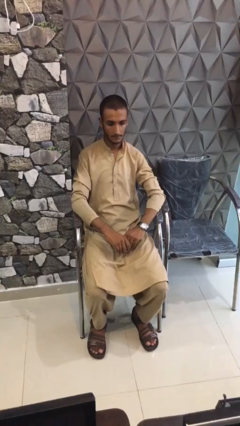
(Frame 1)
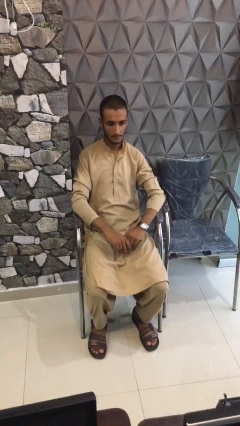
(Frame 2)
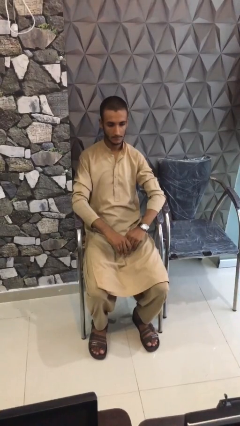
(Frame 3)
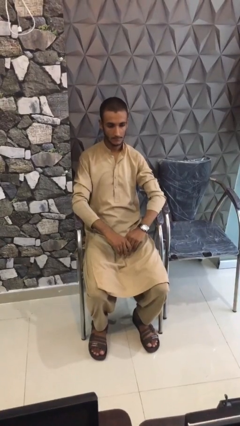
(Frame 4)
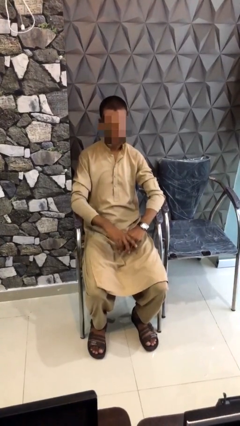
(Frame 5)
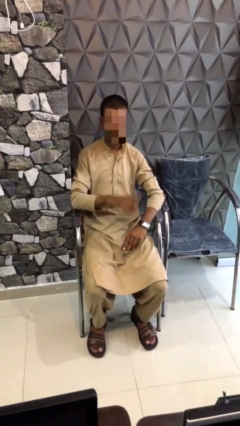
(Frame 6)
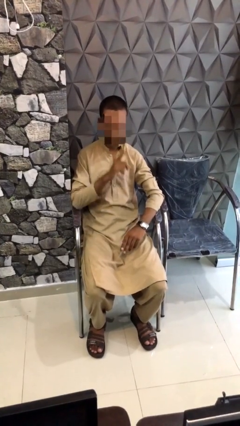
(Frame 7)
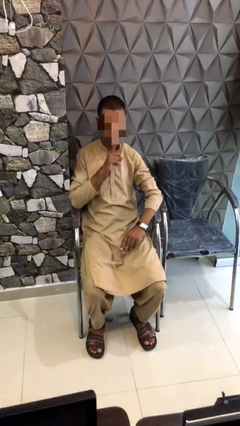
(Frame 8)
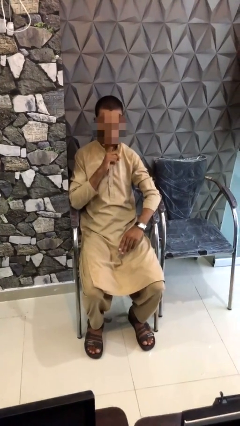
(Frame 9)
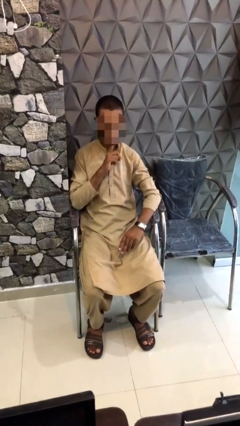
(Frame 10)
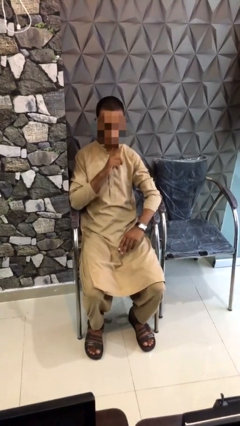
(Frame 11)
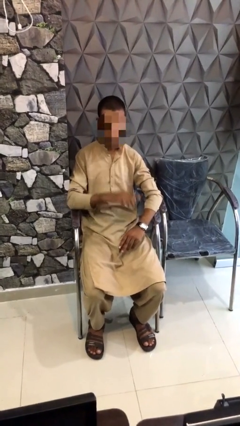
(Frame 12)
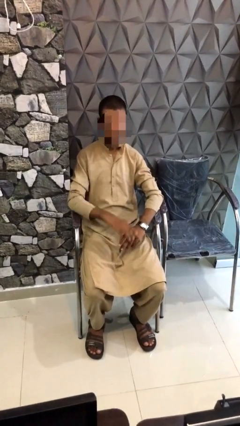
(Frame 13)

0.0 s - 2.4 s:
person gestures be quiet

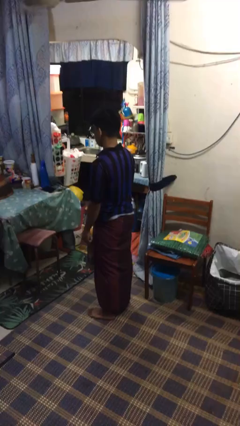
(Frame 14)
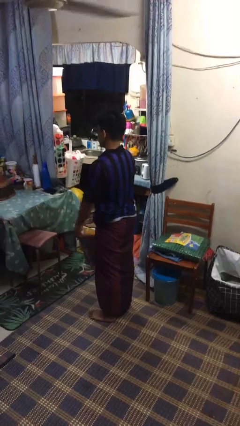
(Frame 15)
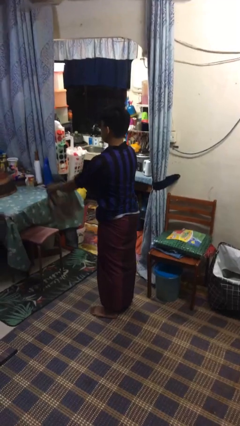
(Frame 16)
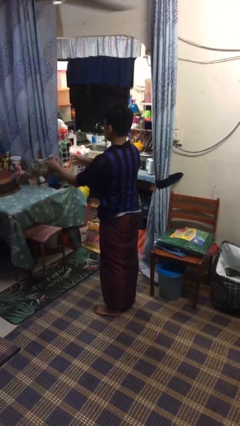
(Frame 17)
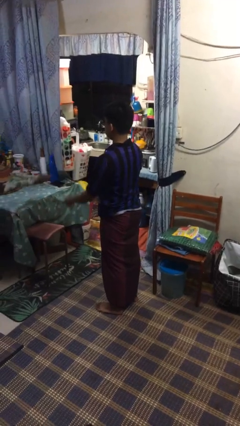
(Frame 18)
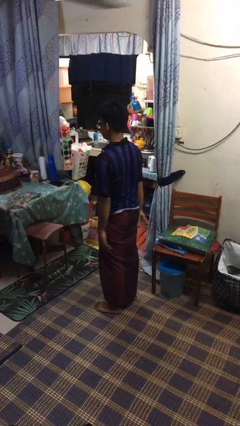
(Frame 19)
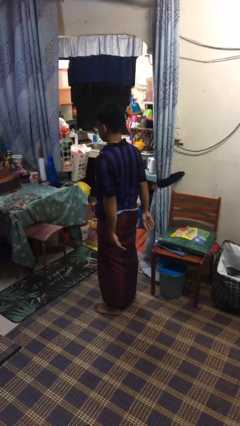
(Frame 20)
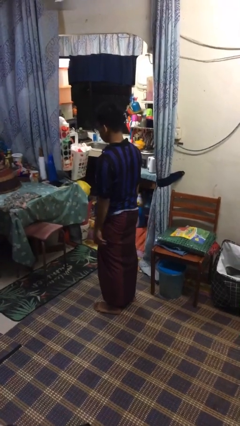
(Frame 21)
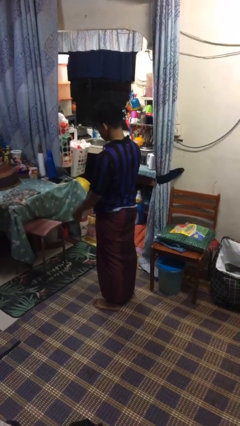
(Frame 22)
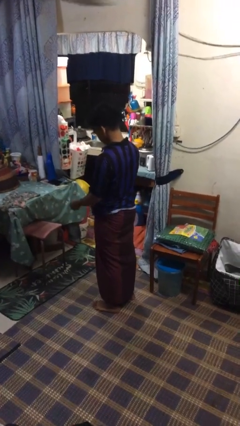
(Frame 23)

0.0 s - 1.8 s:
person throws object on table

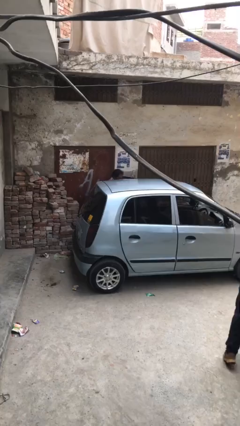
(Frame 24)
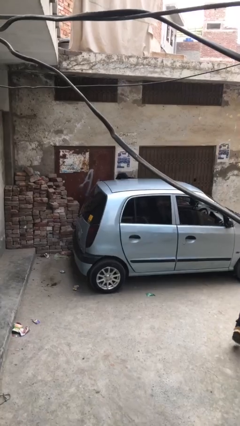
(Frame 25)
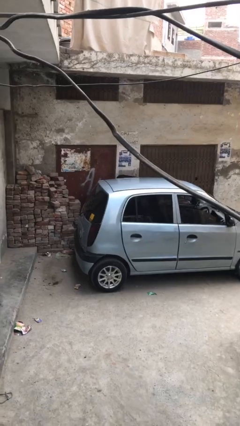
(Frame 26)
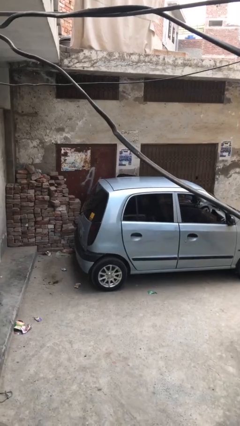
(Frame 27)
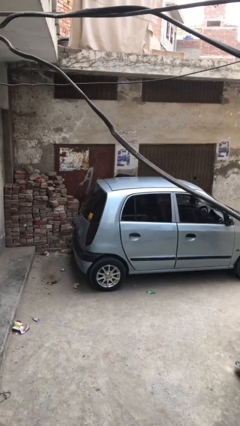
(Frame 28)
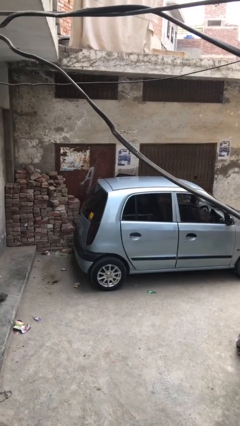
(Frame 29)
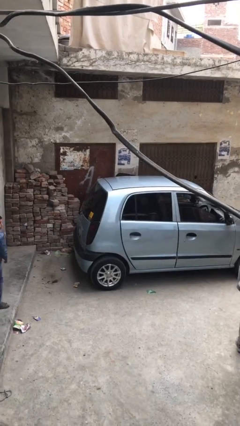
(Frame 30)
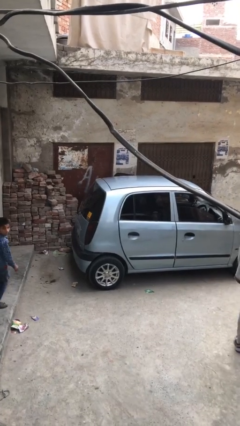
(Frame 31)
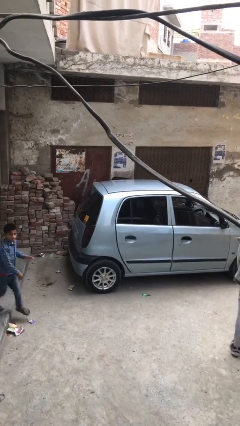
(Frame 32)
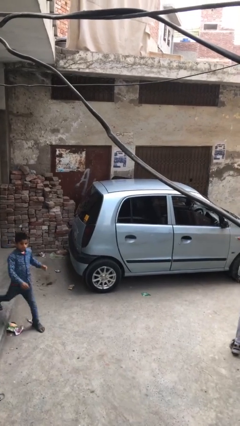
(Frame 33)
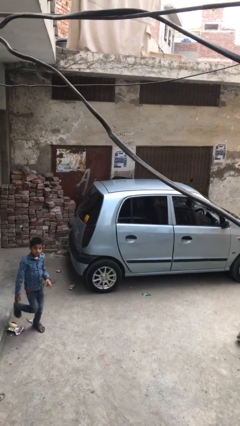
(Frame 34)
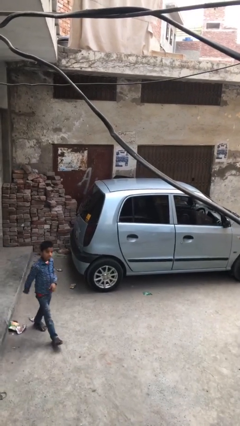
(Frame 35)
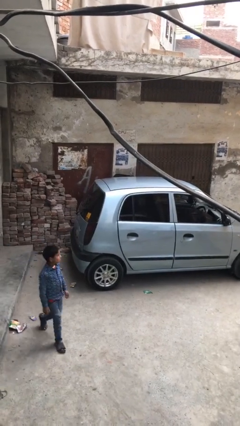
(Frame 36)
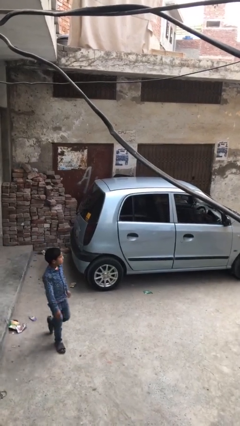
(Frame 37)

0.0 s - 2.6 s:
person enters car

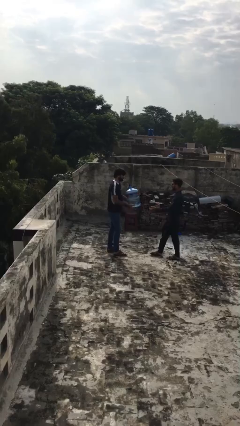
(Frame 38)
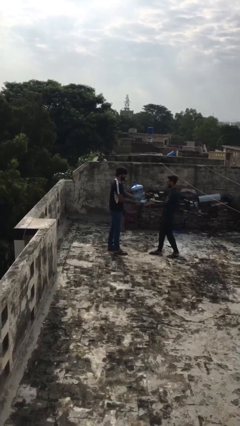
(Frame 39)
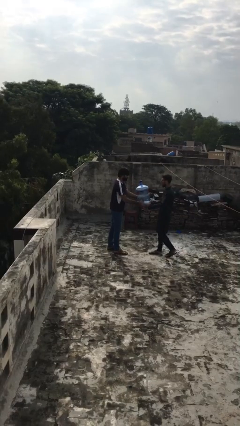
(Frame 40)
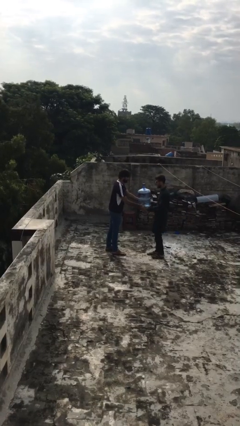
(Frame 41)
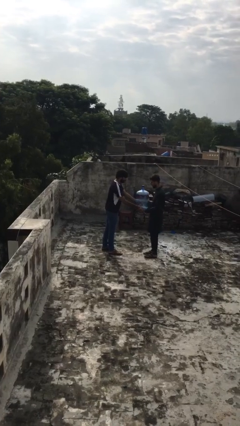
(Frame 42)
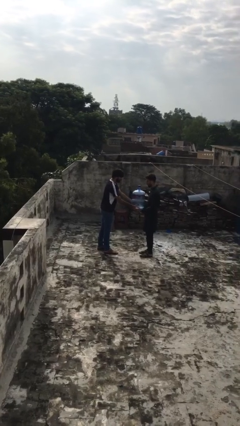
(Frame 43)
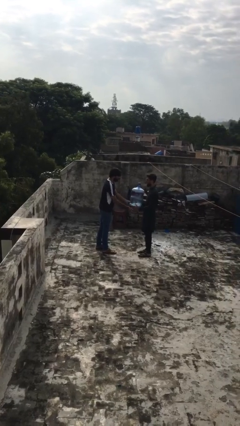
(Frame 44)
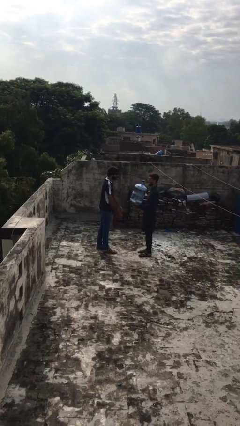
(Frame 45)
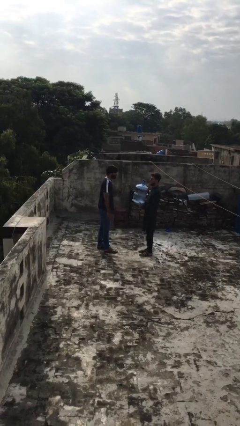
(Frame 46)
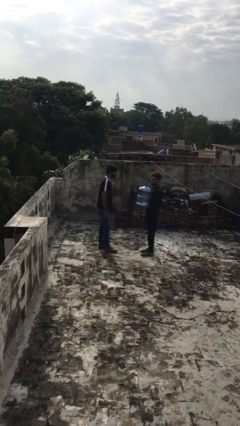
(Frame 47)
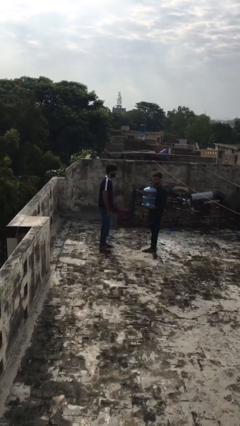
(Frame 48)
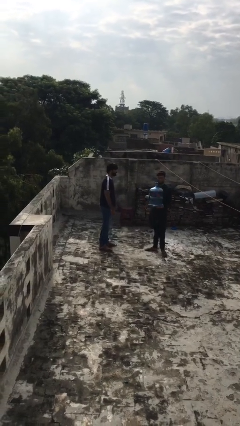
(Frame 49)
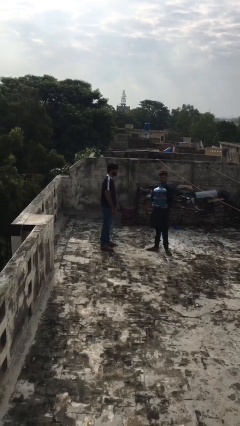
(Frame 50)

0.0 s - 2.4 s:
person transfers object to person

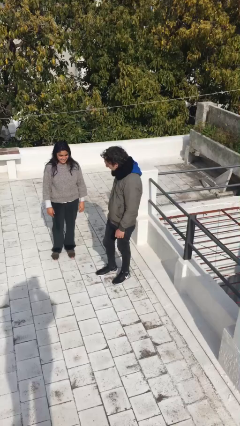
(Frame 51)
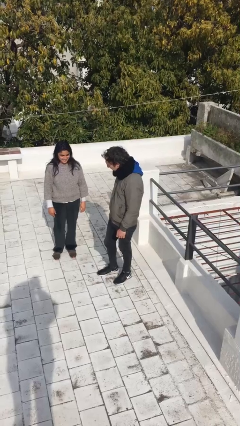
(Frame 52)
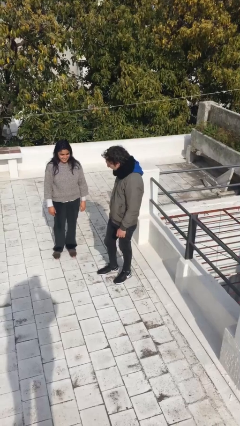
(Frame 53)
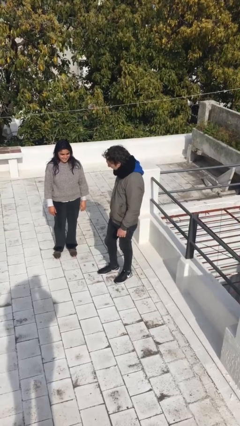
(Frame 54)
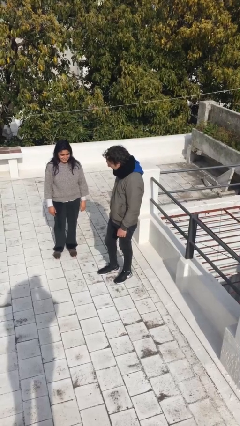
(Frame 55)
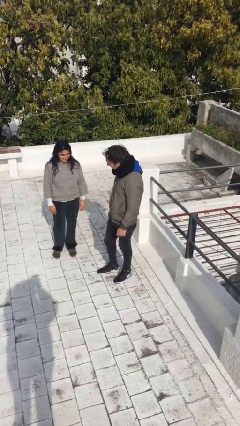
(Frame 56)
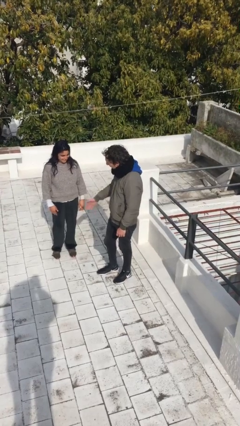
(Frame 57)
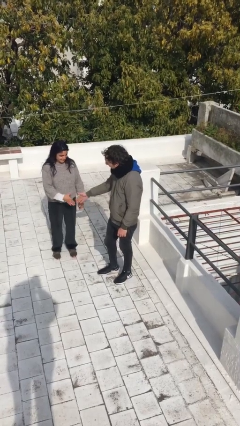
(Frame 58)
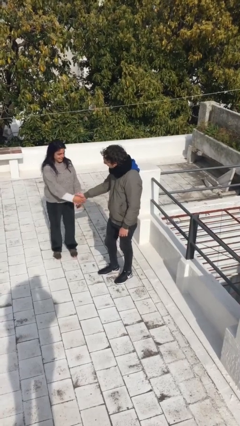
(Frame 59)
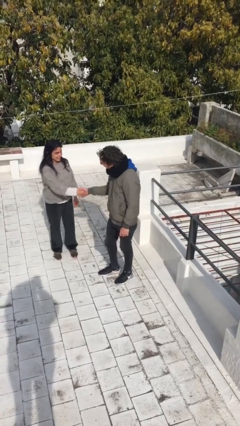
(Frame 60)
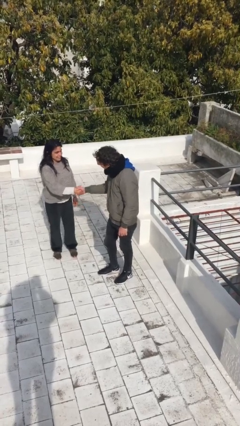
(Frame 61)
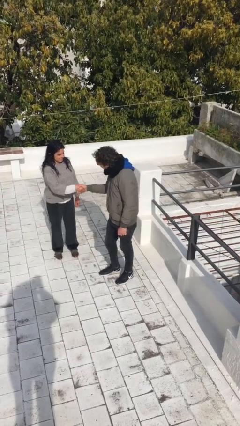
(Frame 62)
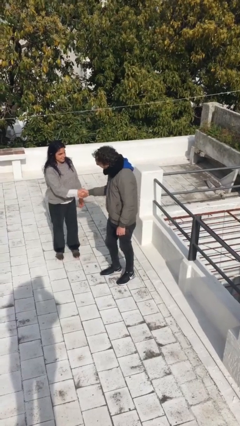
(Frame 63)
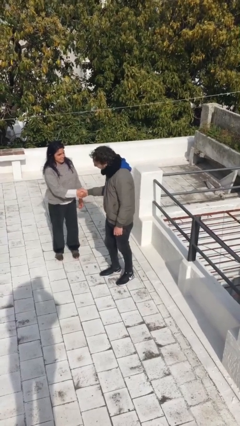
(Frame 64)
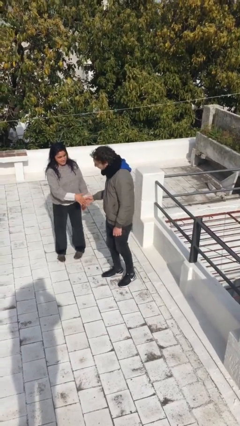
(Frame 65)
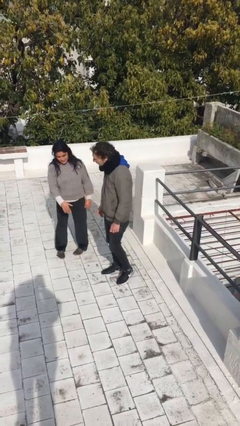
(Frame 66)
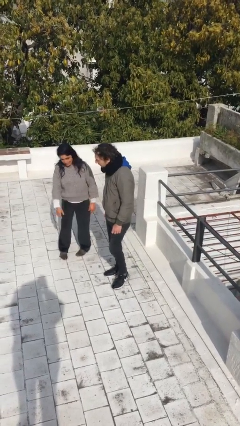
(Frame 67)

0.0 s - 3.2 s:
person shakes hand

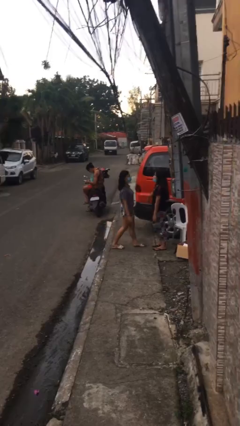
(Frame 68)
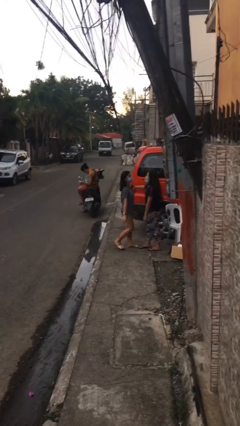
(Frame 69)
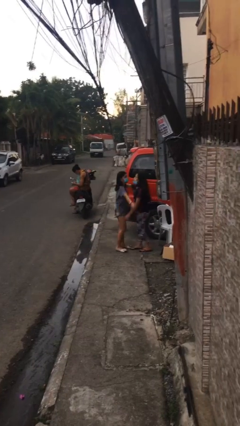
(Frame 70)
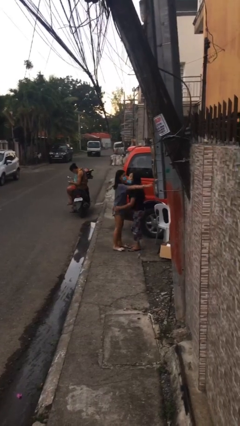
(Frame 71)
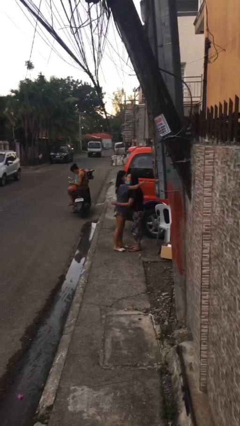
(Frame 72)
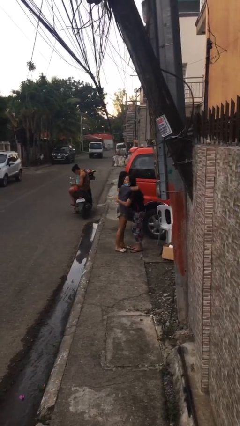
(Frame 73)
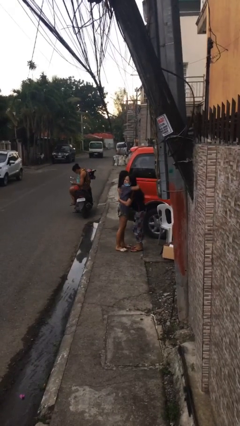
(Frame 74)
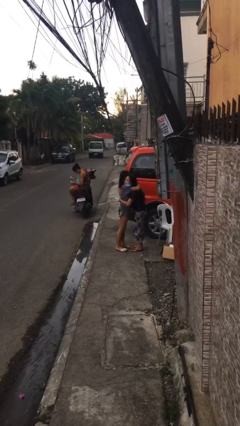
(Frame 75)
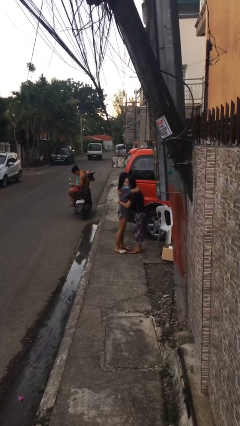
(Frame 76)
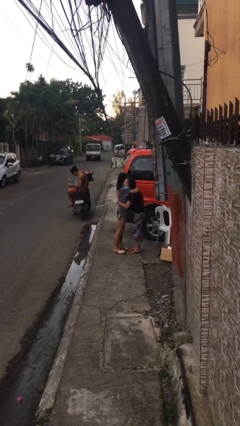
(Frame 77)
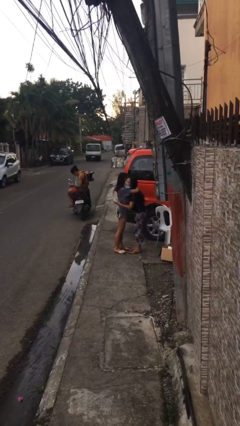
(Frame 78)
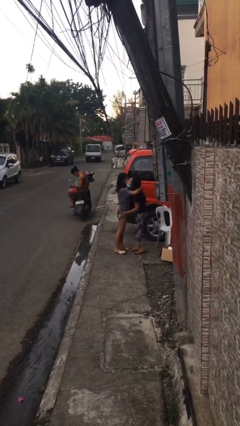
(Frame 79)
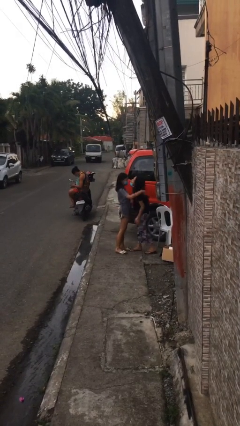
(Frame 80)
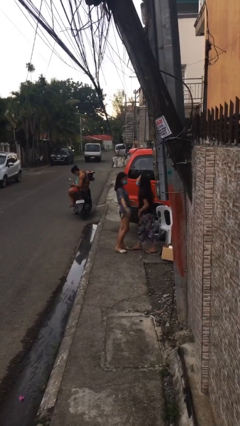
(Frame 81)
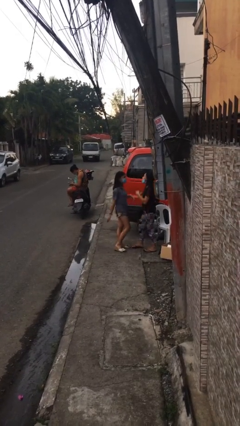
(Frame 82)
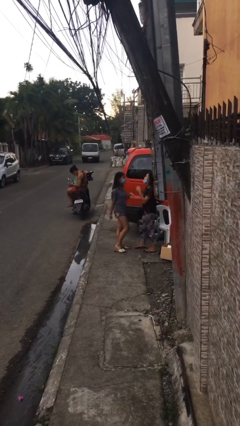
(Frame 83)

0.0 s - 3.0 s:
person embraces person

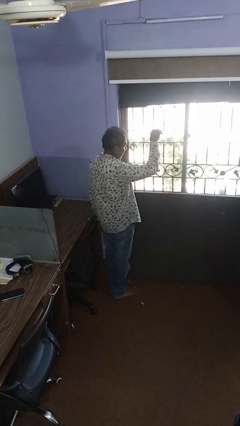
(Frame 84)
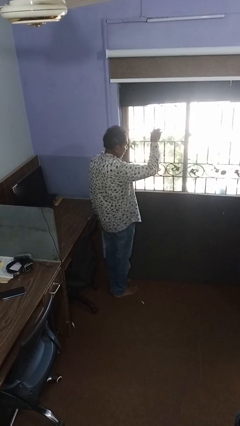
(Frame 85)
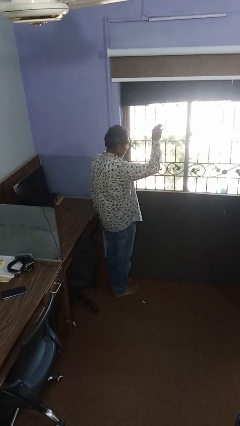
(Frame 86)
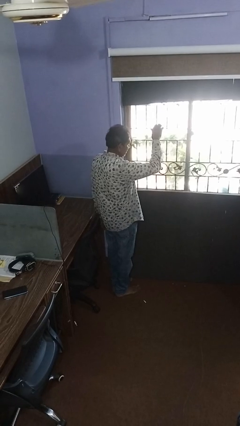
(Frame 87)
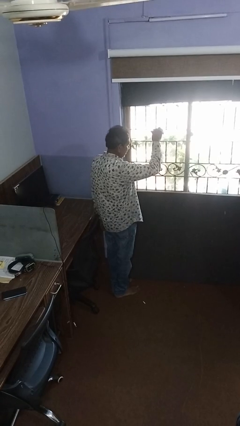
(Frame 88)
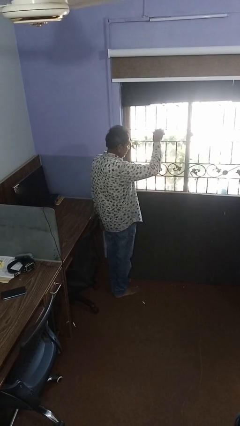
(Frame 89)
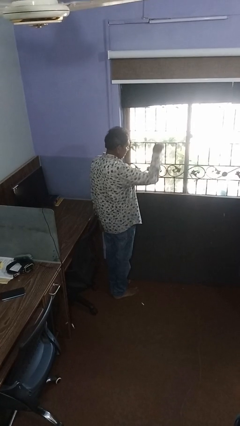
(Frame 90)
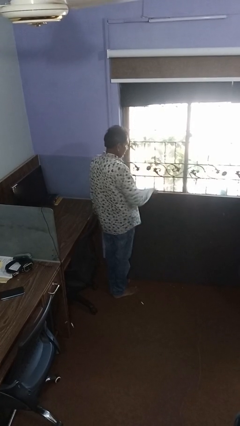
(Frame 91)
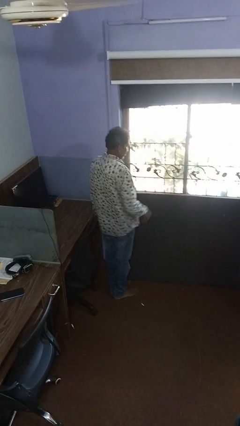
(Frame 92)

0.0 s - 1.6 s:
person gestures come here
